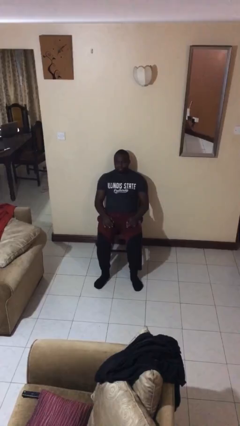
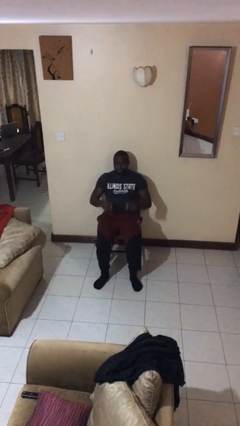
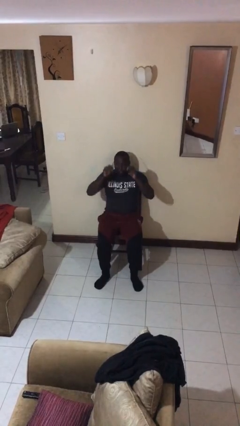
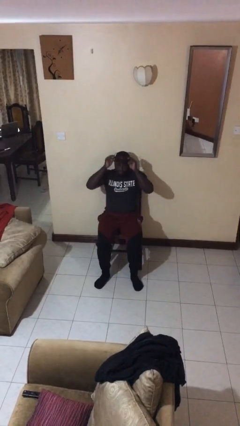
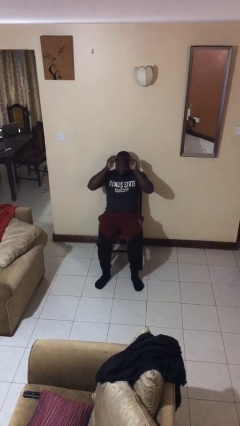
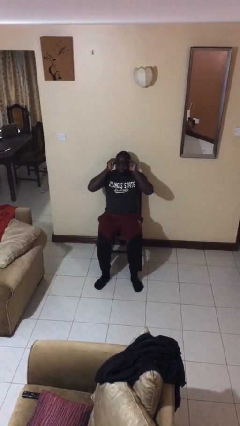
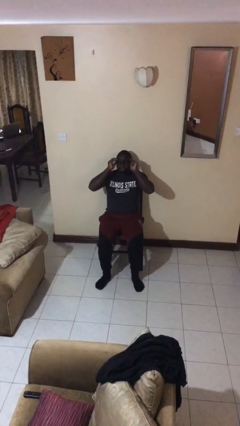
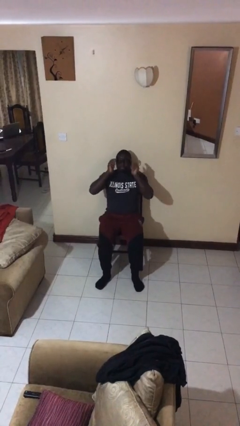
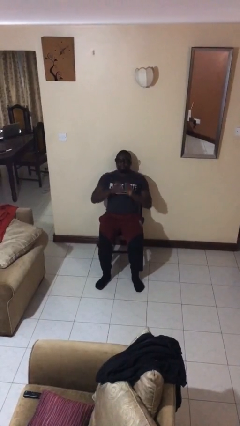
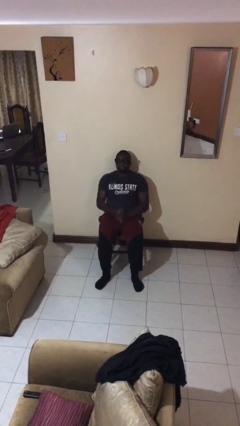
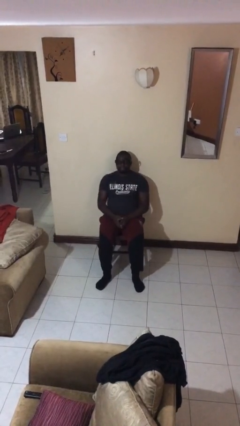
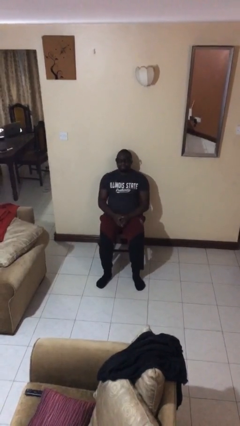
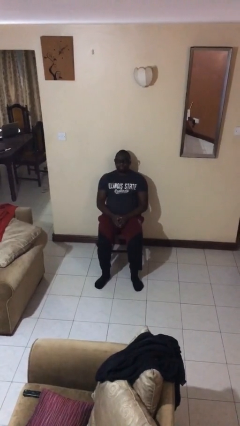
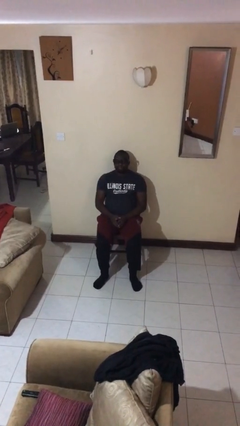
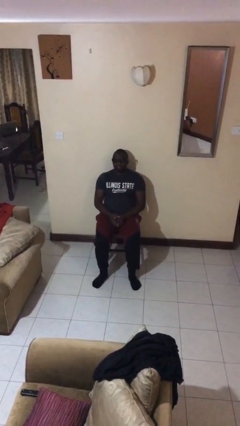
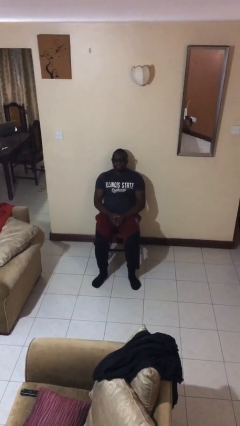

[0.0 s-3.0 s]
person puts on glasses

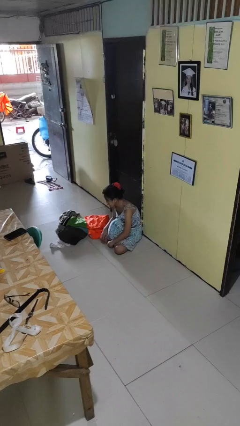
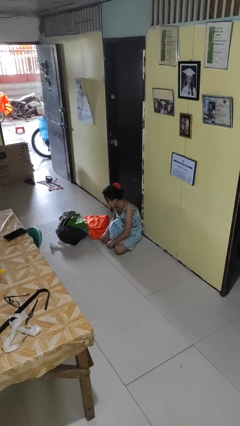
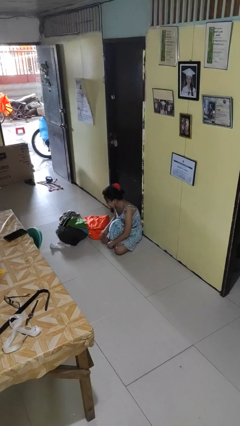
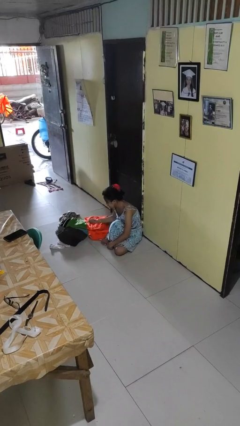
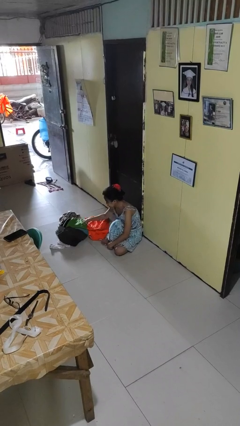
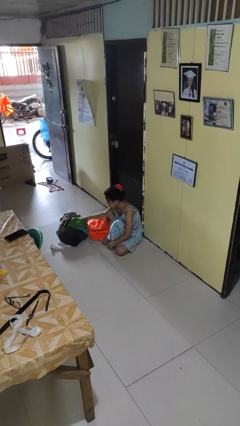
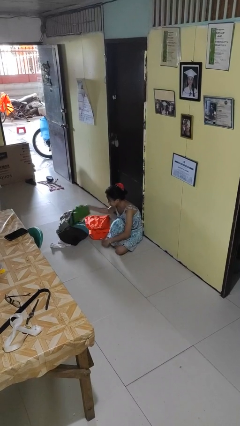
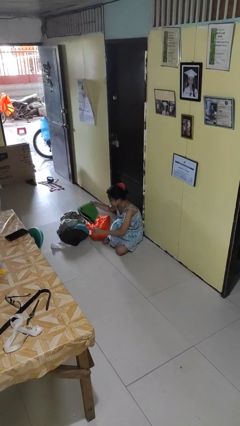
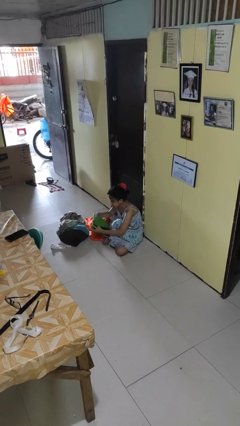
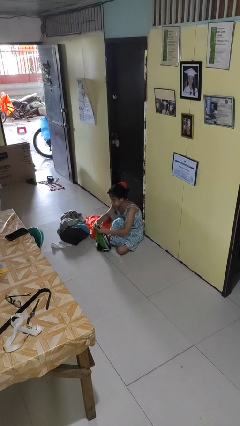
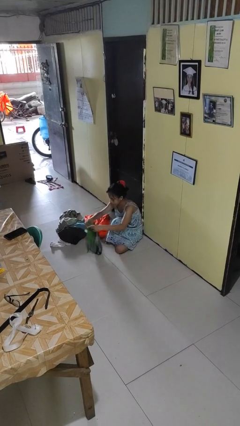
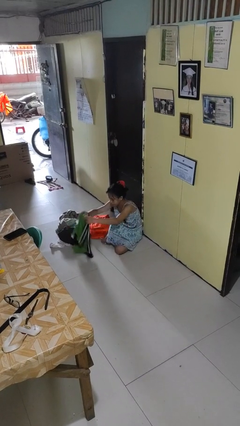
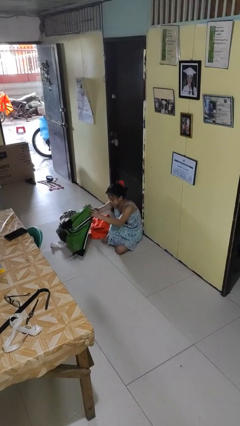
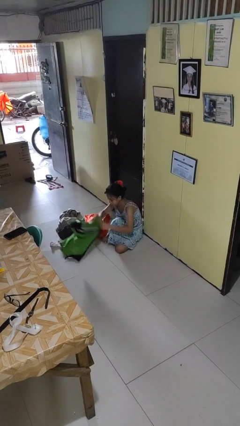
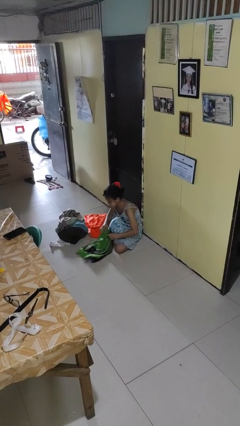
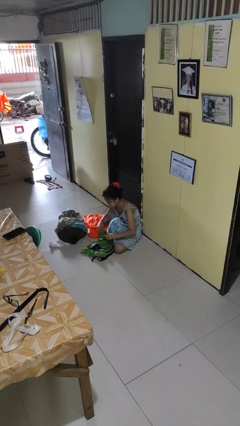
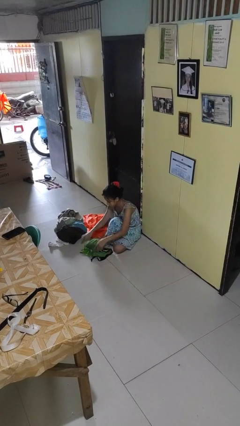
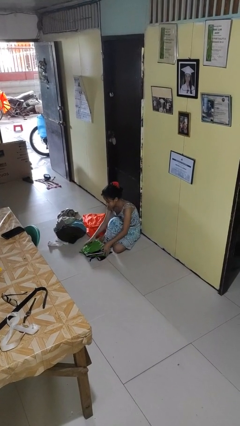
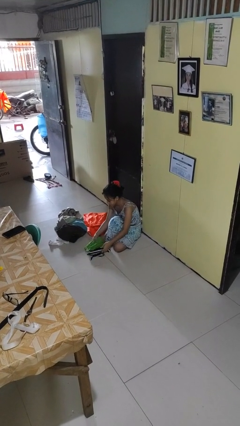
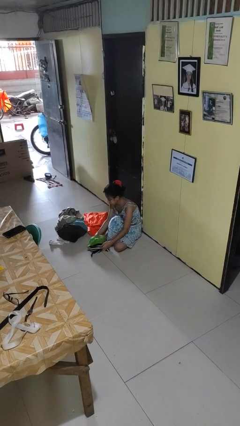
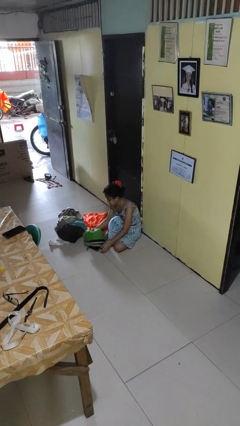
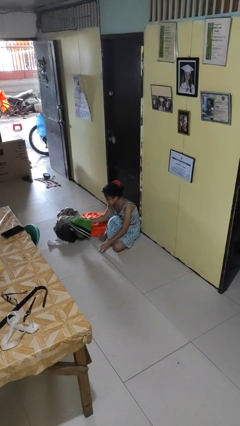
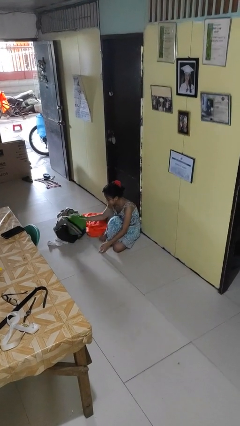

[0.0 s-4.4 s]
person folds pants

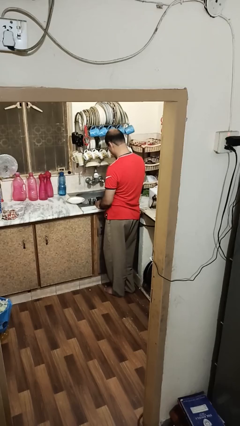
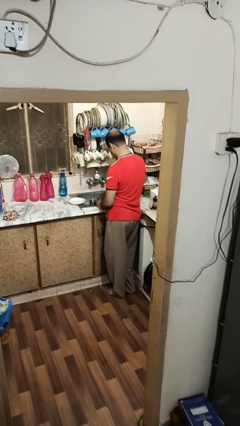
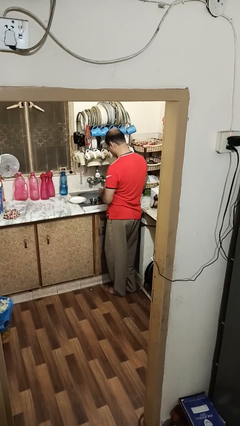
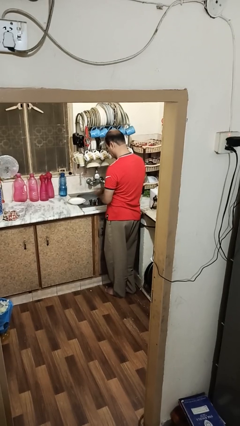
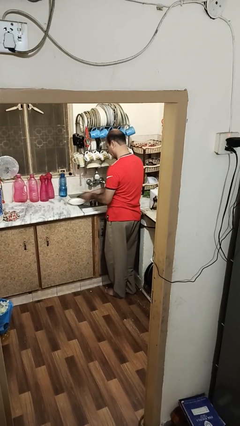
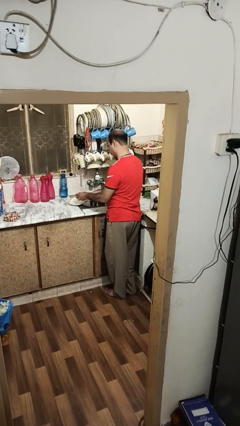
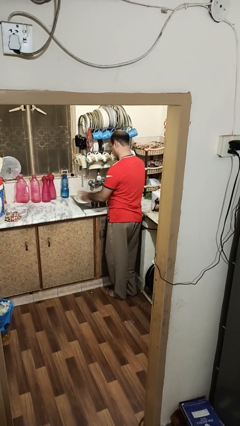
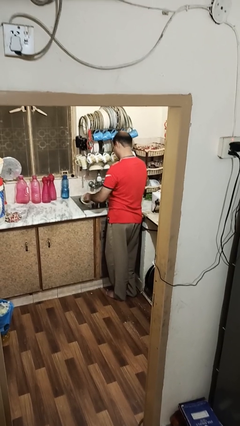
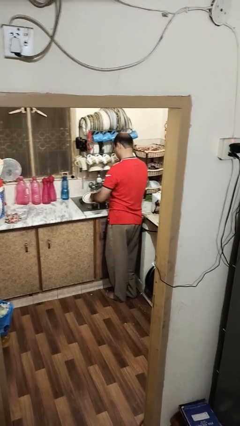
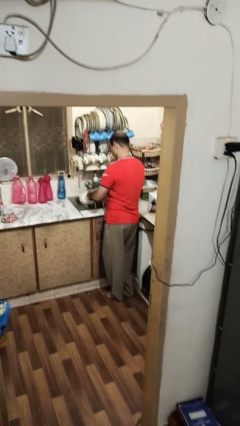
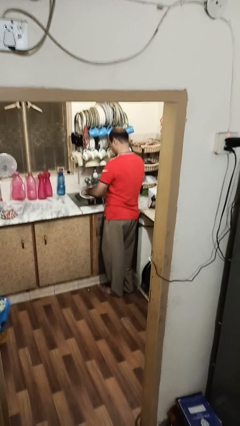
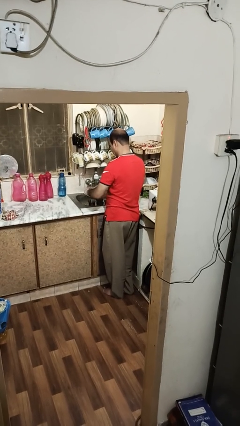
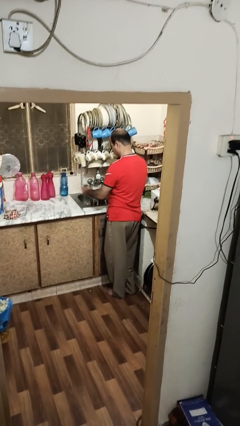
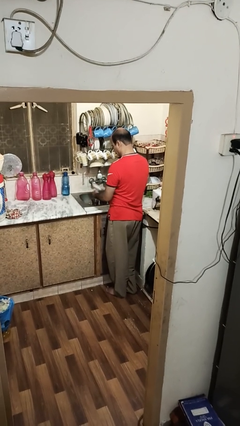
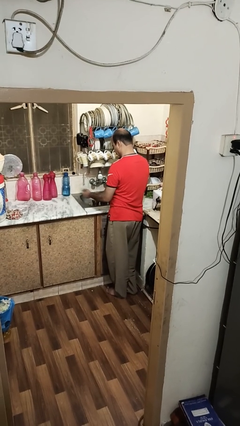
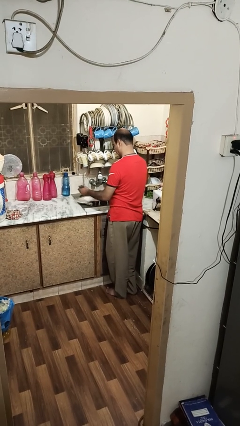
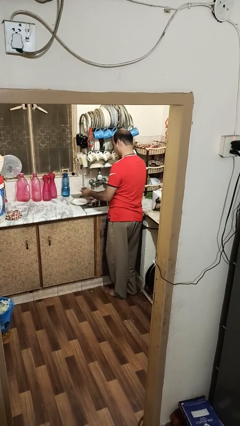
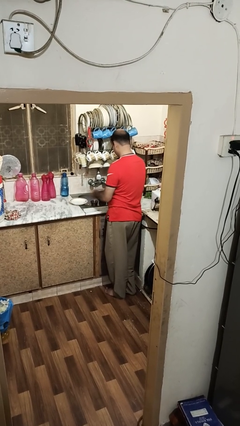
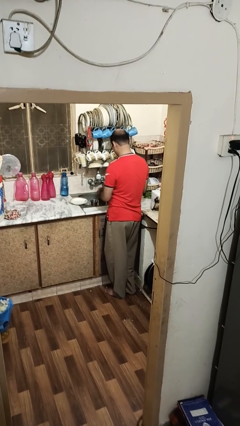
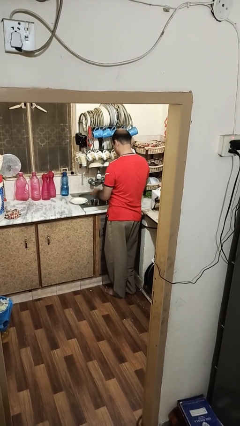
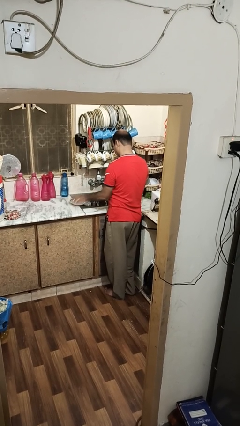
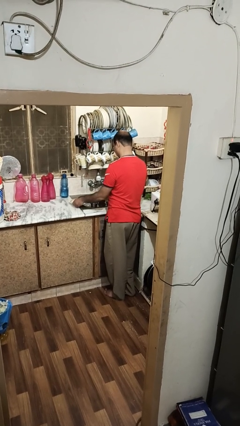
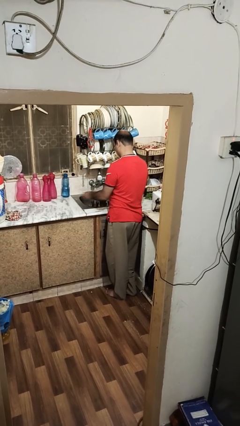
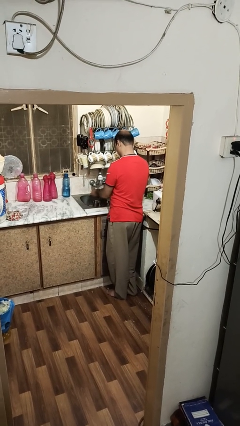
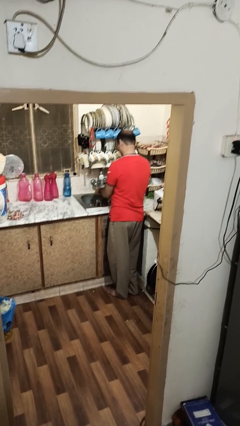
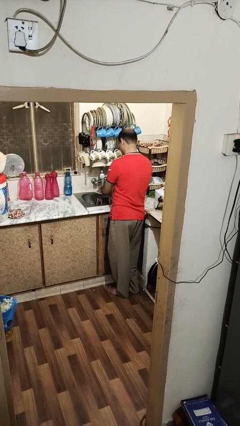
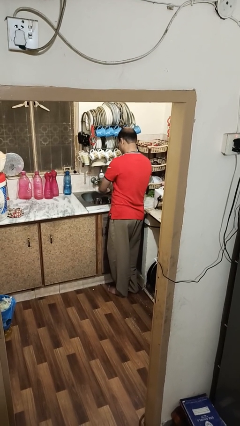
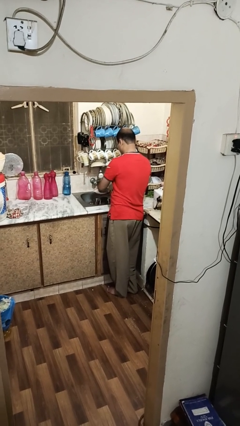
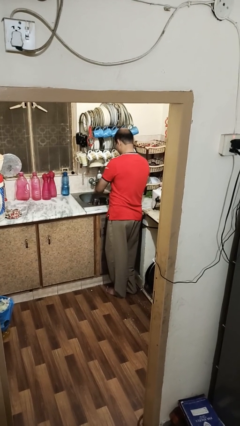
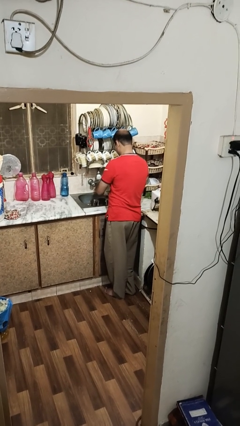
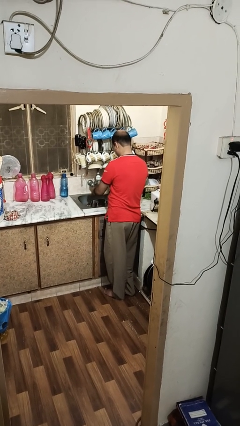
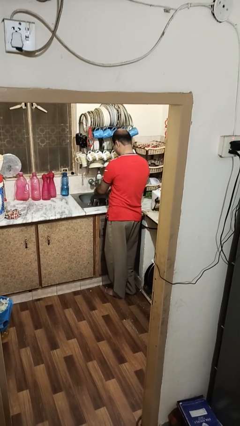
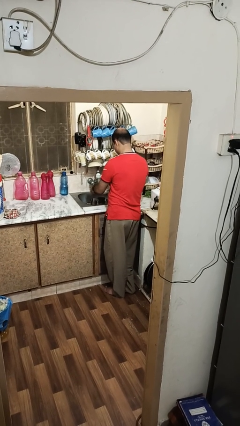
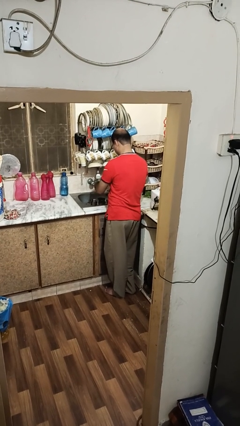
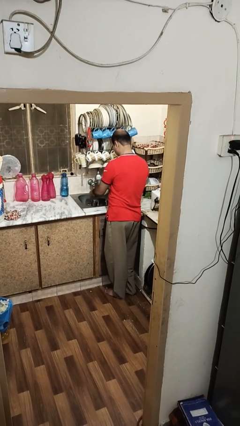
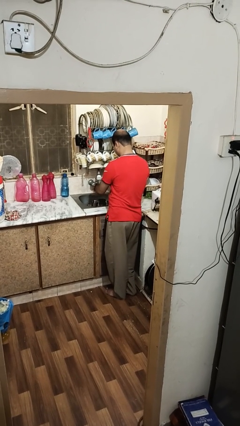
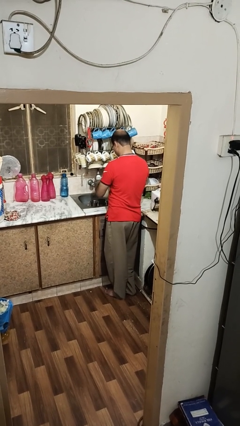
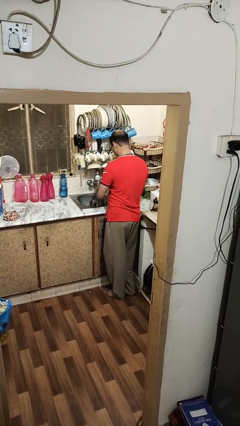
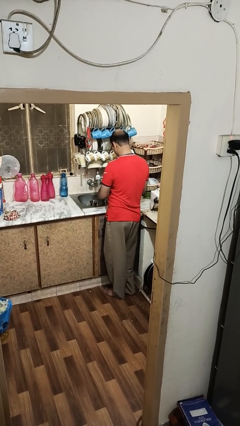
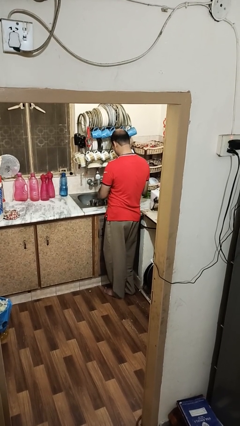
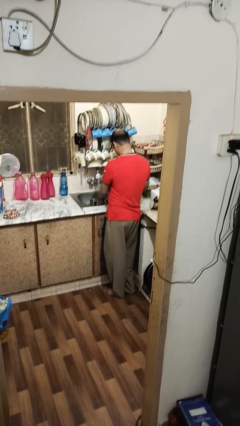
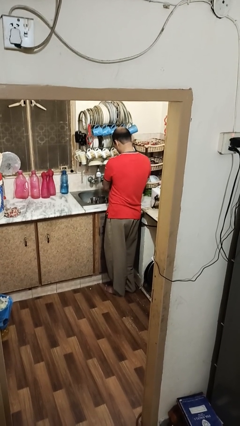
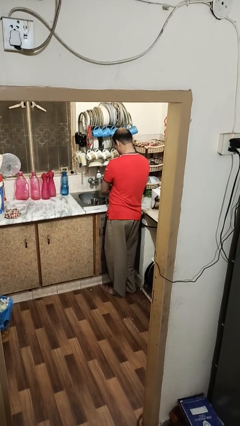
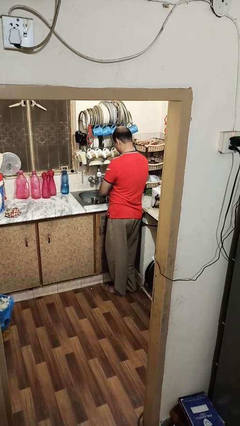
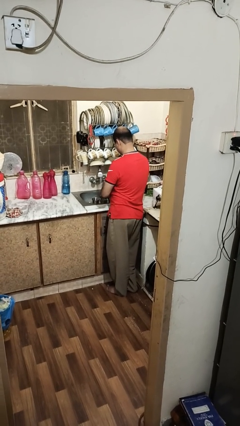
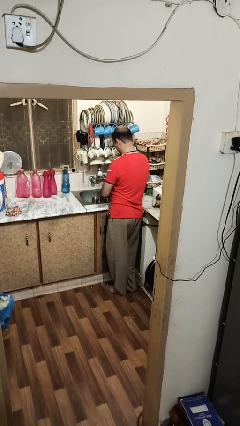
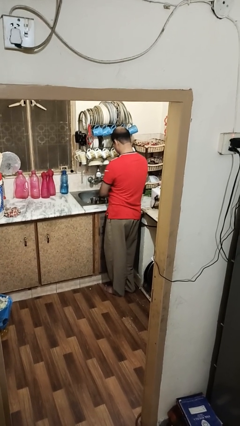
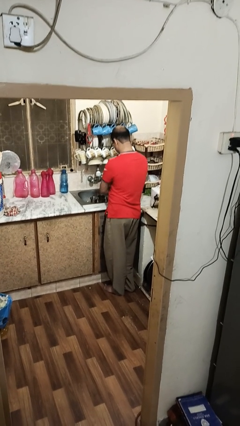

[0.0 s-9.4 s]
person washes dish

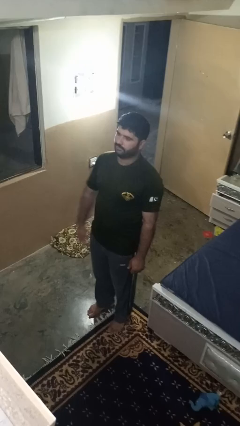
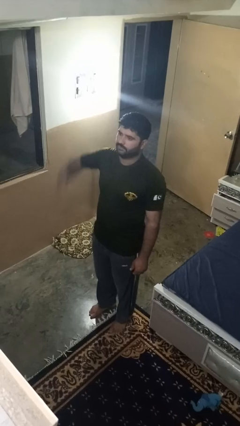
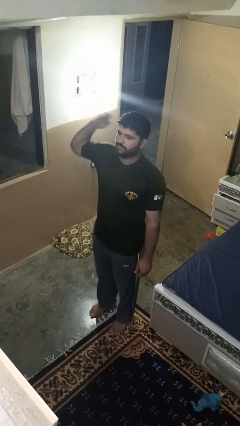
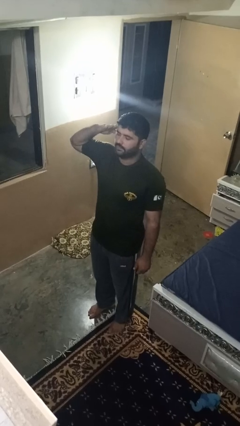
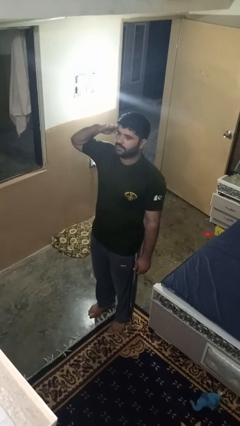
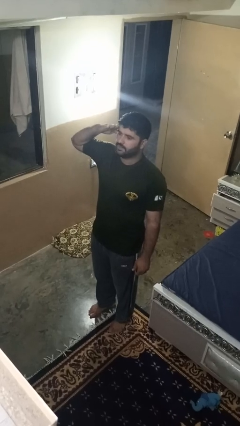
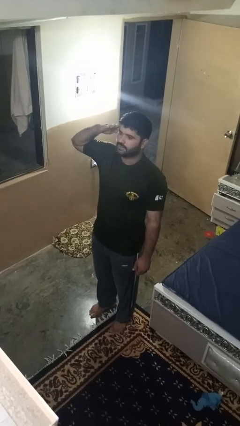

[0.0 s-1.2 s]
person salutes

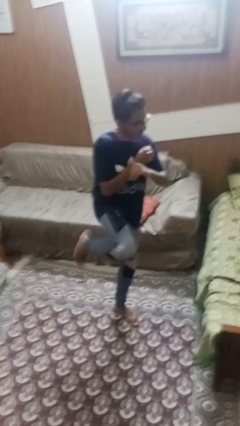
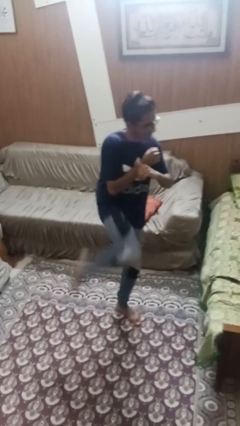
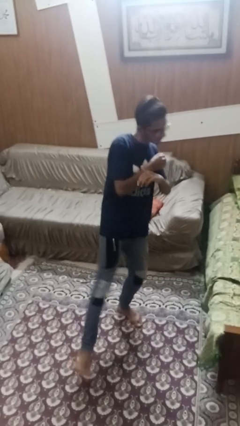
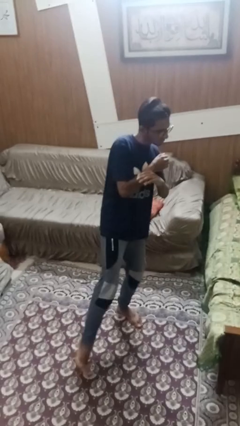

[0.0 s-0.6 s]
person karate kicks
